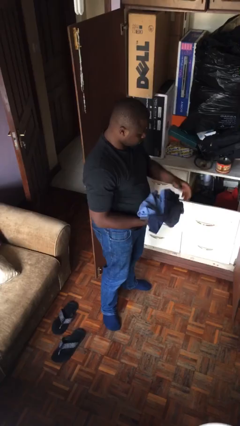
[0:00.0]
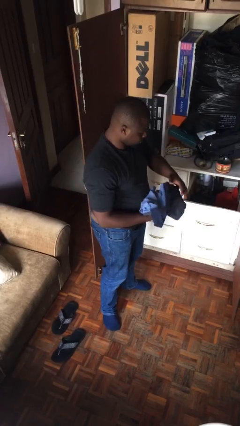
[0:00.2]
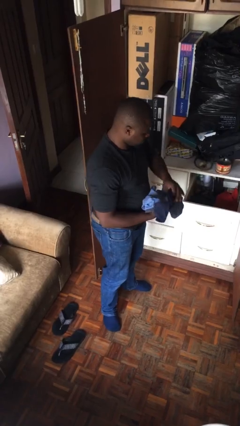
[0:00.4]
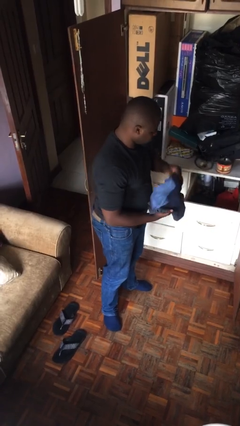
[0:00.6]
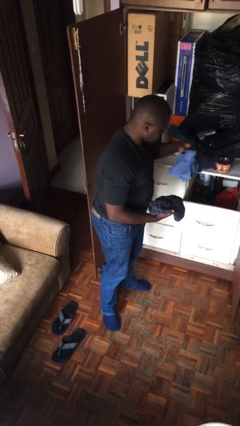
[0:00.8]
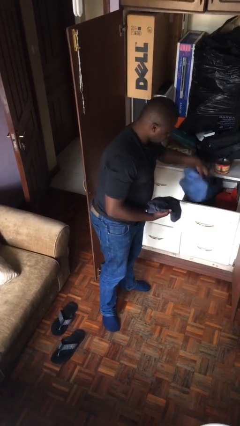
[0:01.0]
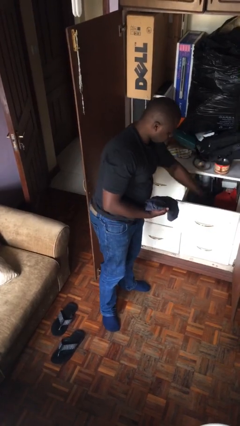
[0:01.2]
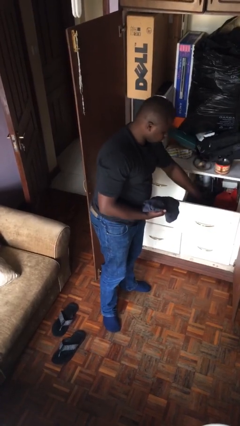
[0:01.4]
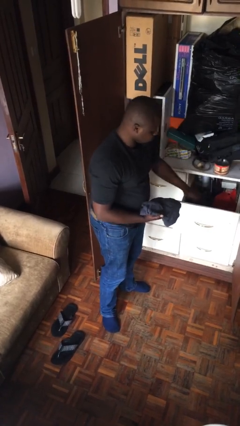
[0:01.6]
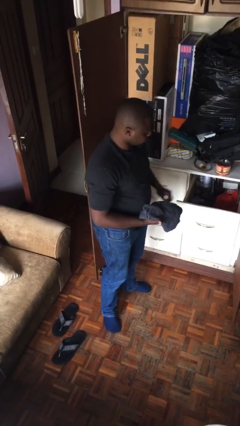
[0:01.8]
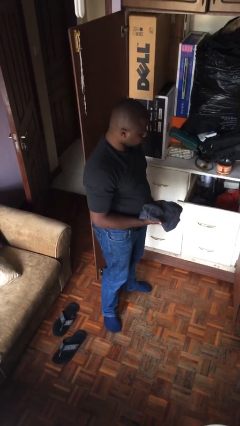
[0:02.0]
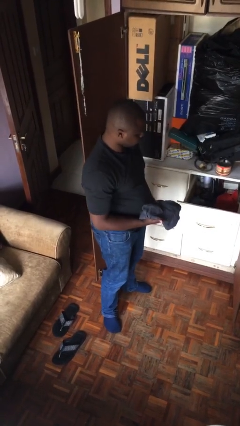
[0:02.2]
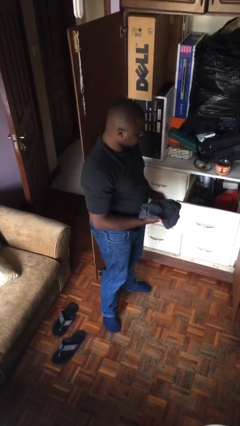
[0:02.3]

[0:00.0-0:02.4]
person puts clothes into dresser

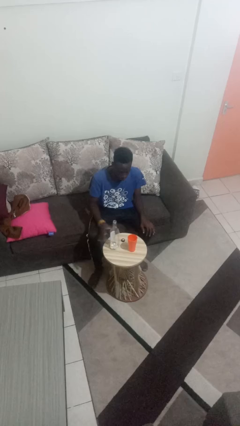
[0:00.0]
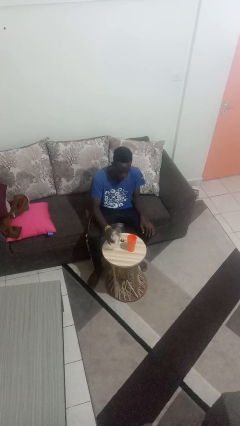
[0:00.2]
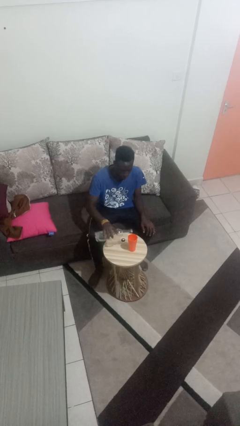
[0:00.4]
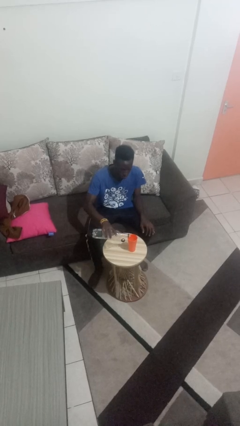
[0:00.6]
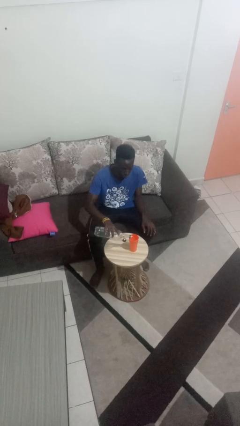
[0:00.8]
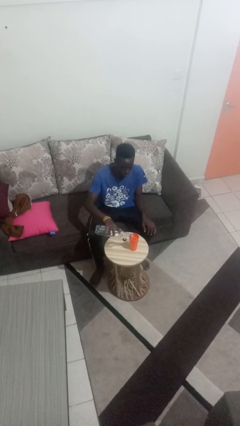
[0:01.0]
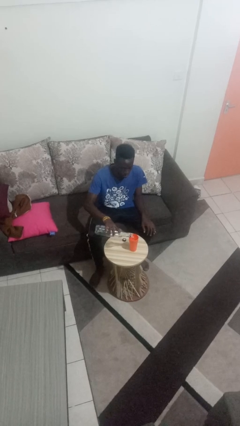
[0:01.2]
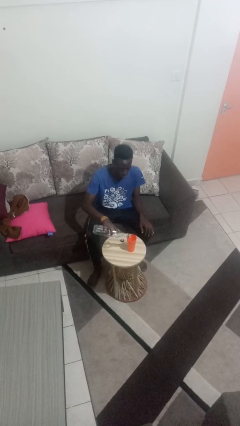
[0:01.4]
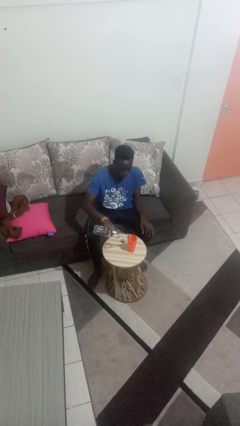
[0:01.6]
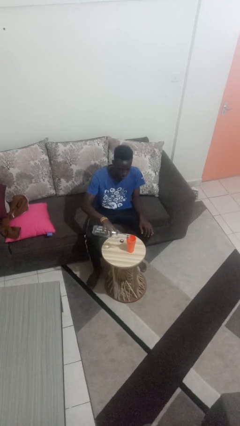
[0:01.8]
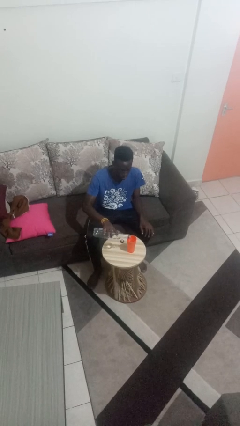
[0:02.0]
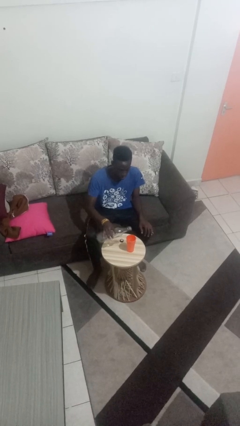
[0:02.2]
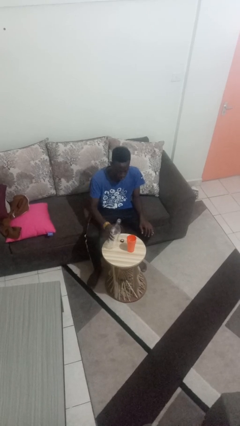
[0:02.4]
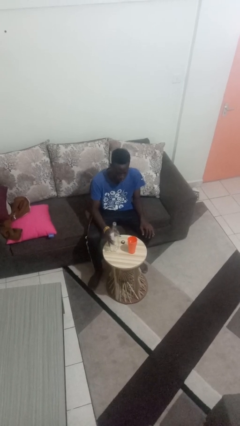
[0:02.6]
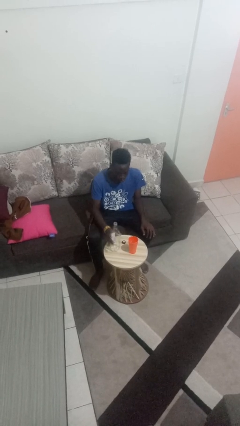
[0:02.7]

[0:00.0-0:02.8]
person pours liquid into cup

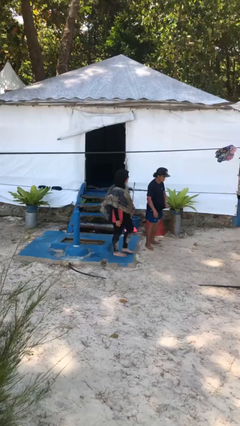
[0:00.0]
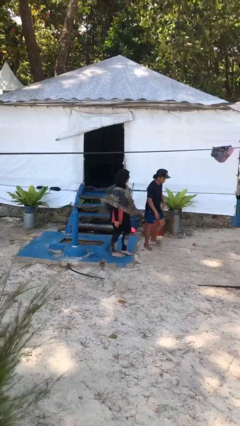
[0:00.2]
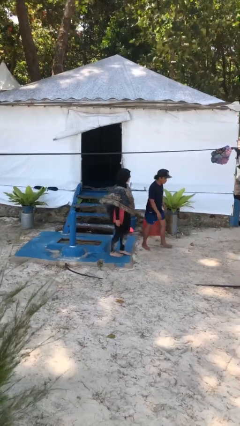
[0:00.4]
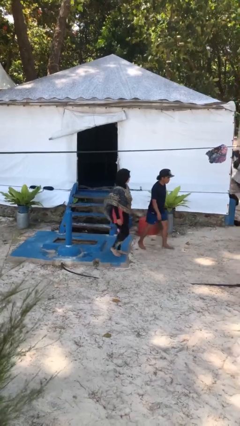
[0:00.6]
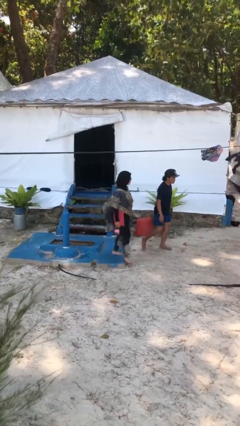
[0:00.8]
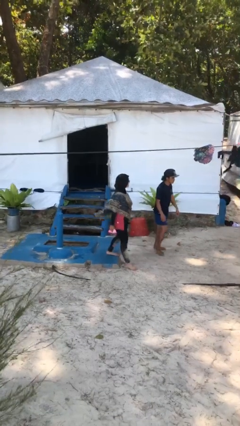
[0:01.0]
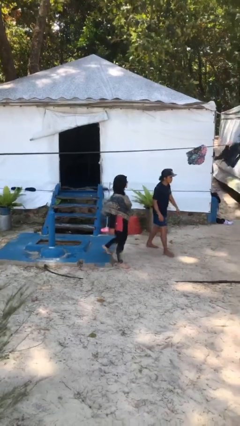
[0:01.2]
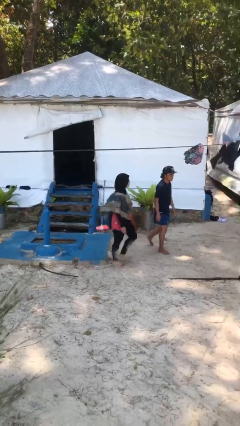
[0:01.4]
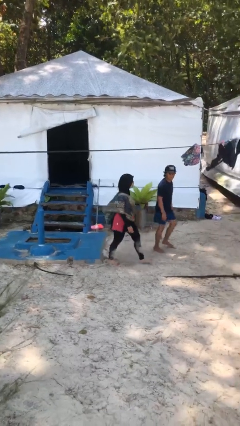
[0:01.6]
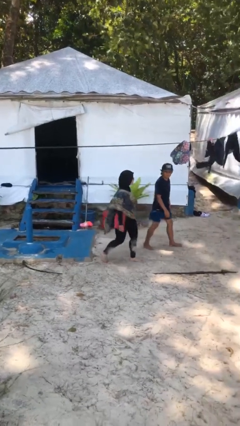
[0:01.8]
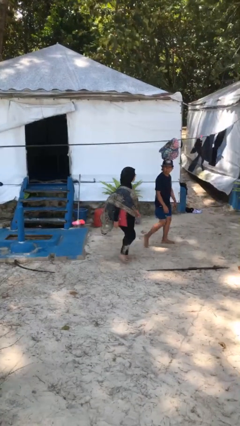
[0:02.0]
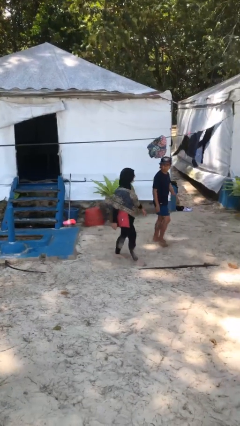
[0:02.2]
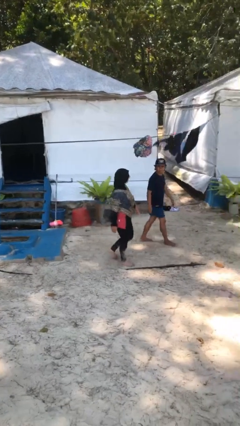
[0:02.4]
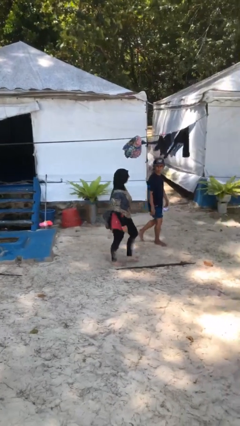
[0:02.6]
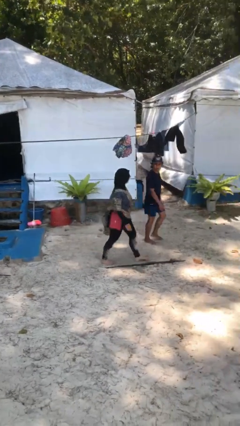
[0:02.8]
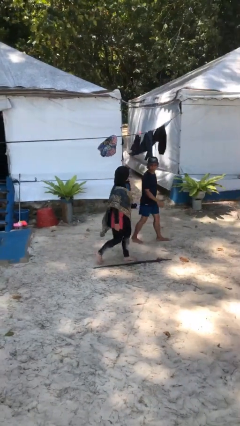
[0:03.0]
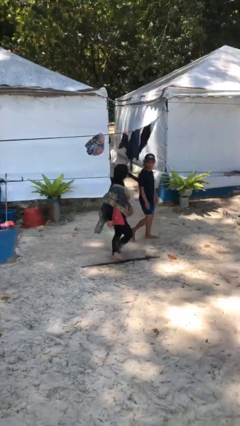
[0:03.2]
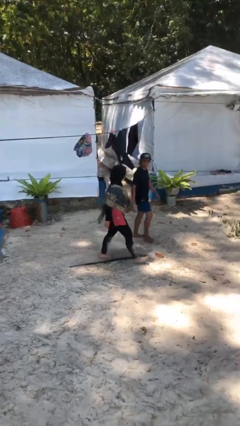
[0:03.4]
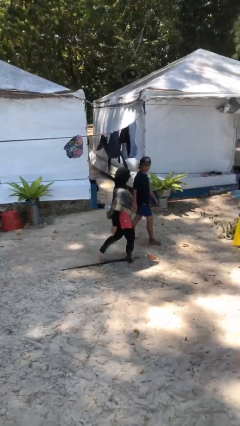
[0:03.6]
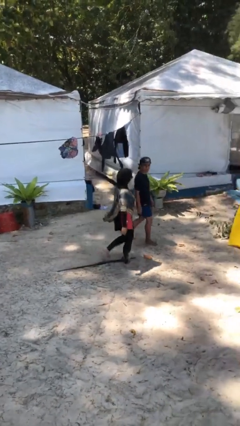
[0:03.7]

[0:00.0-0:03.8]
person talks to person

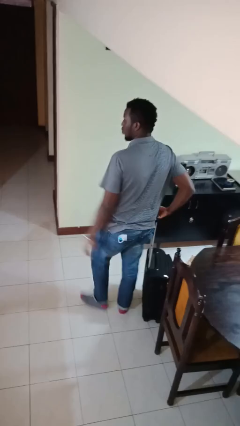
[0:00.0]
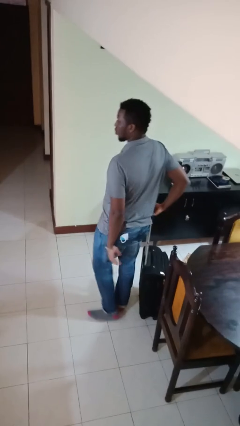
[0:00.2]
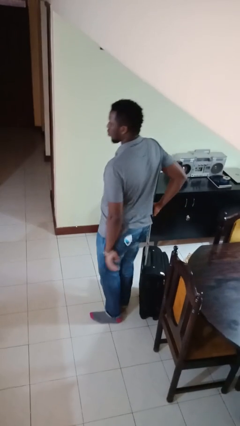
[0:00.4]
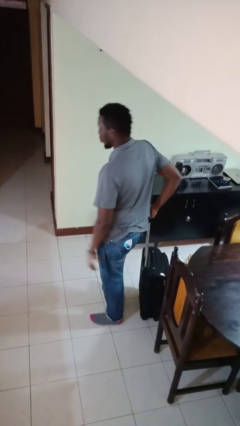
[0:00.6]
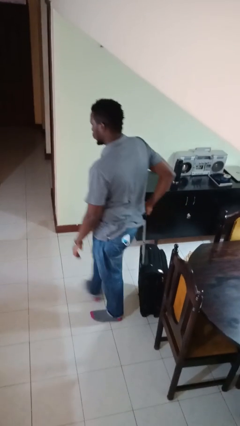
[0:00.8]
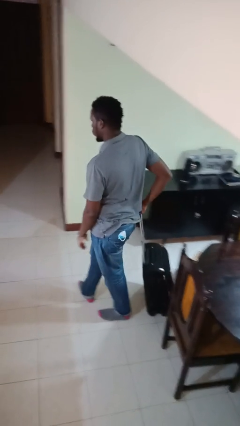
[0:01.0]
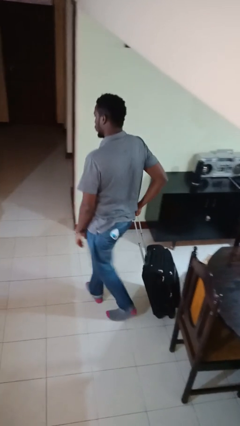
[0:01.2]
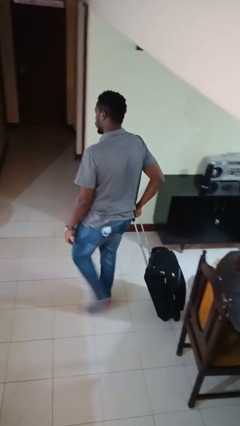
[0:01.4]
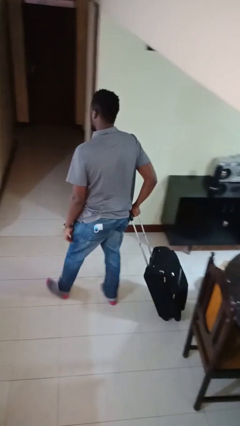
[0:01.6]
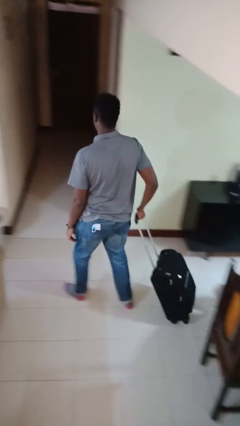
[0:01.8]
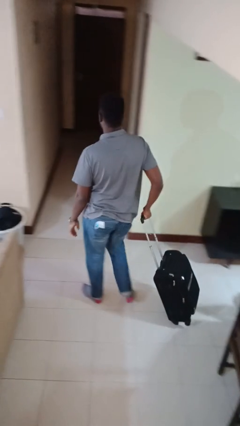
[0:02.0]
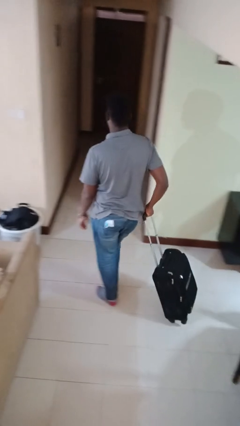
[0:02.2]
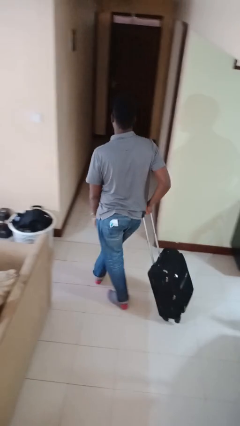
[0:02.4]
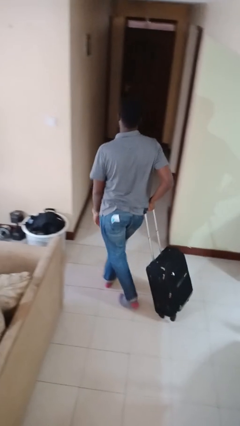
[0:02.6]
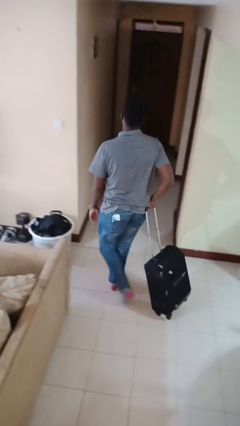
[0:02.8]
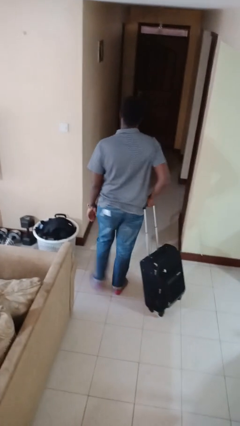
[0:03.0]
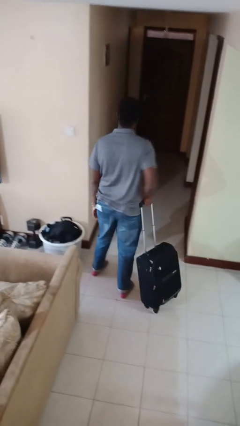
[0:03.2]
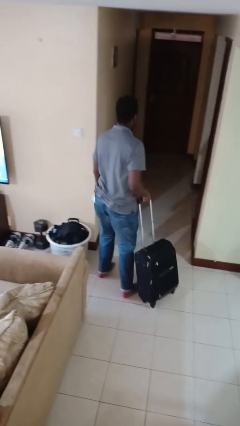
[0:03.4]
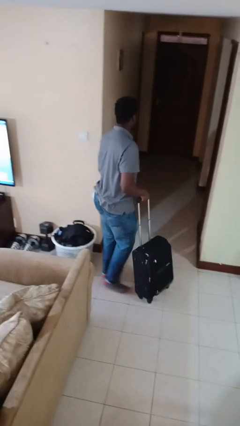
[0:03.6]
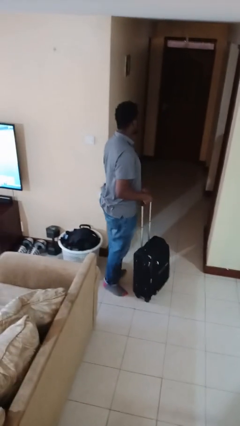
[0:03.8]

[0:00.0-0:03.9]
person pulls wheeled cart

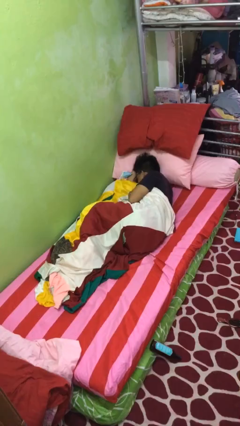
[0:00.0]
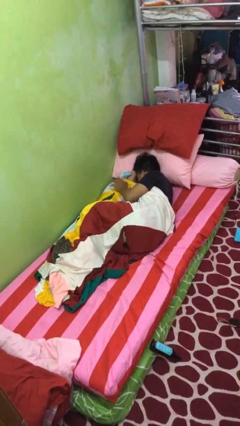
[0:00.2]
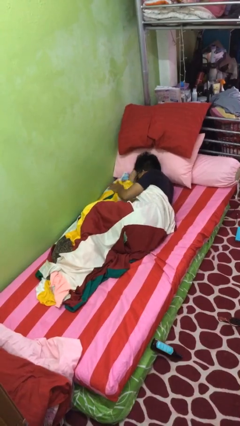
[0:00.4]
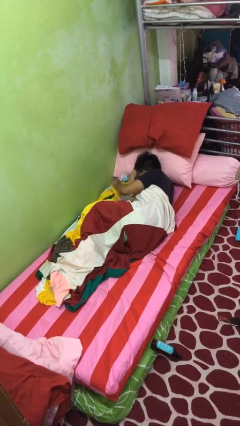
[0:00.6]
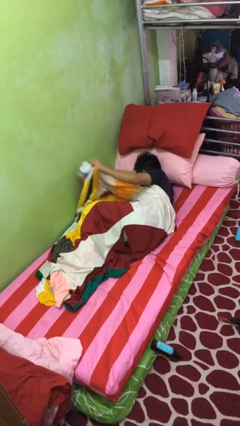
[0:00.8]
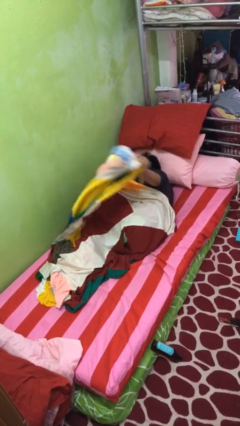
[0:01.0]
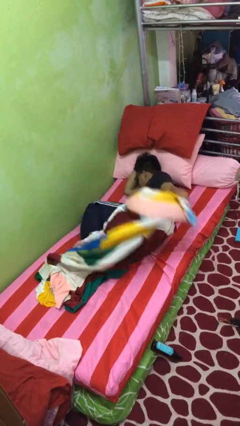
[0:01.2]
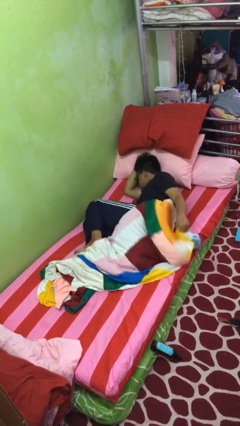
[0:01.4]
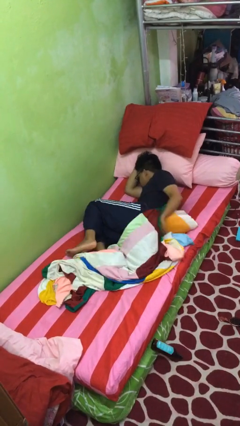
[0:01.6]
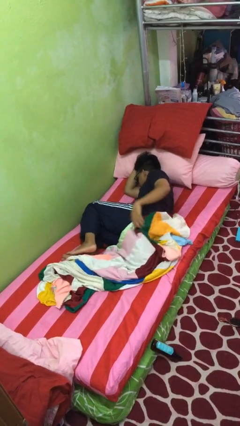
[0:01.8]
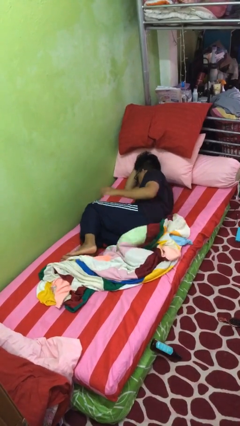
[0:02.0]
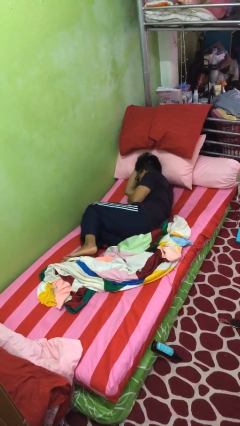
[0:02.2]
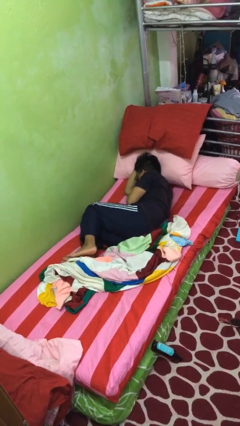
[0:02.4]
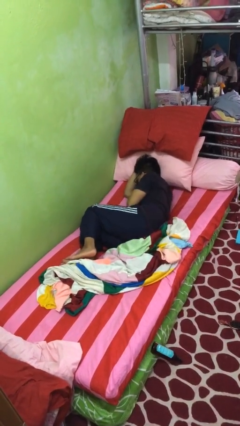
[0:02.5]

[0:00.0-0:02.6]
person uncovers with blanket

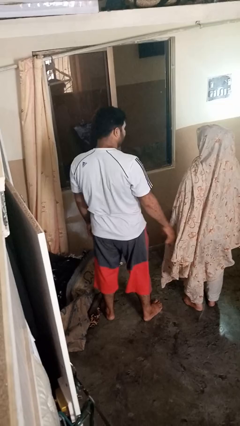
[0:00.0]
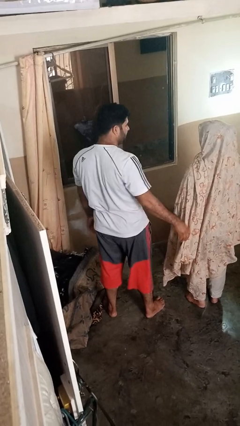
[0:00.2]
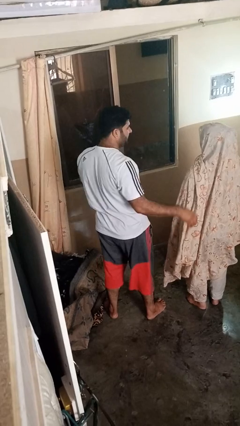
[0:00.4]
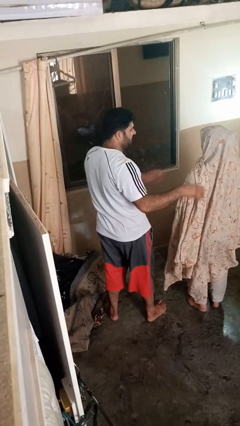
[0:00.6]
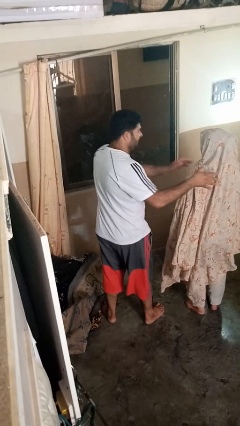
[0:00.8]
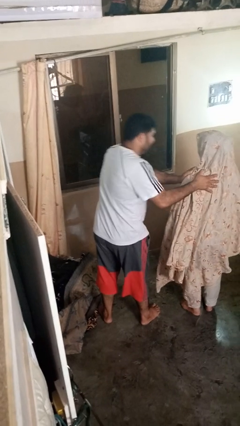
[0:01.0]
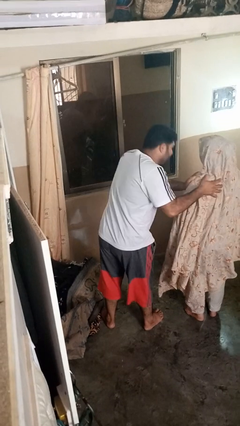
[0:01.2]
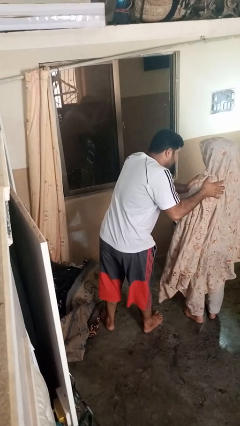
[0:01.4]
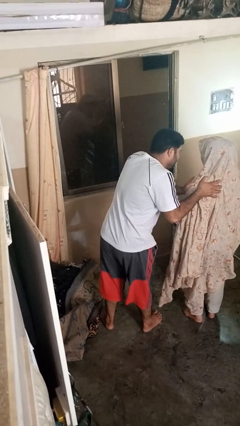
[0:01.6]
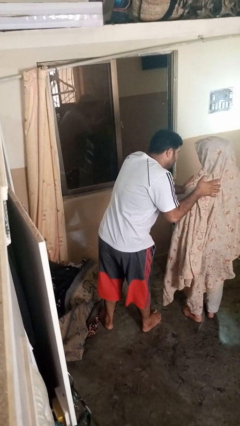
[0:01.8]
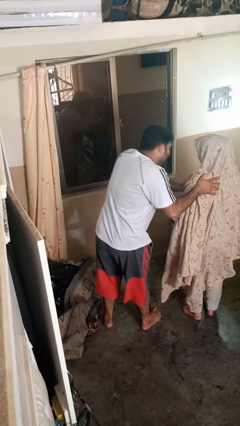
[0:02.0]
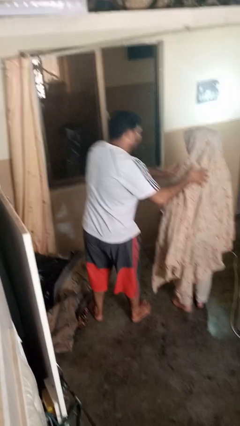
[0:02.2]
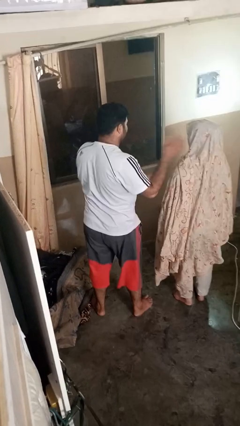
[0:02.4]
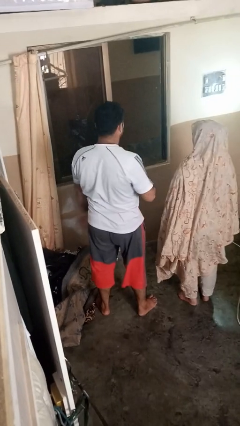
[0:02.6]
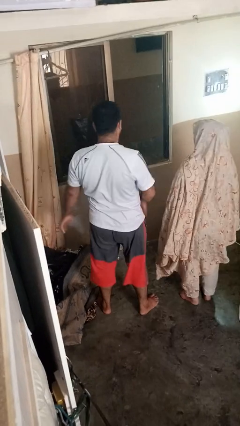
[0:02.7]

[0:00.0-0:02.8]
person shoves person
